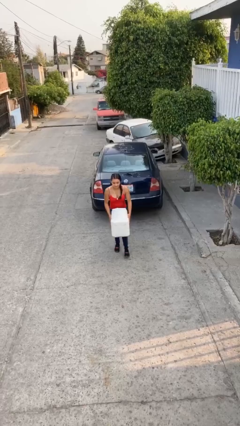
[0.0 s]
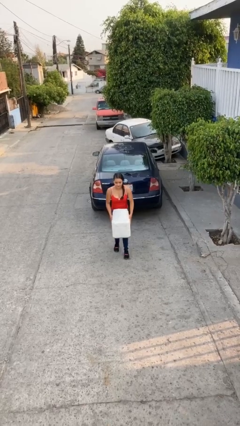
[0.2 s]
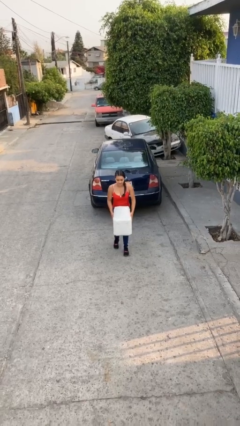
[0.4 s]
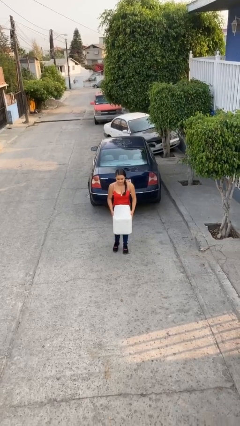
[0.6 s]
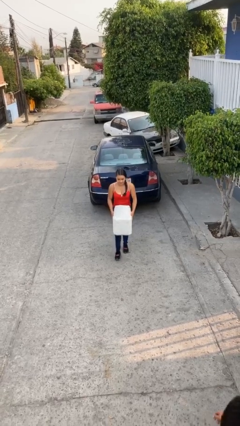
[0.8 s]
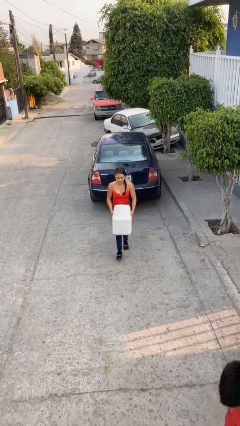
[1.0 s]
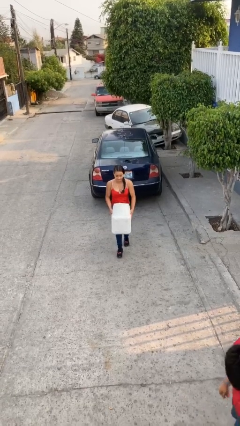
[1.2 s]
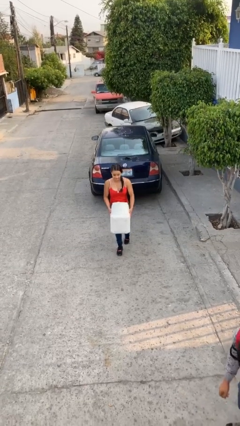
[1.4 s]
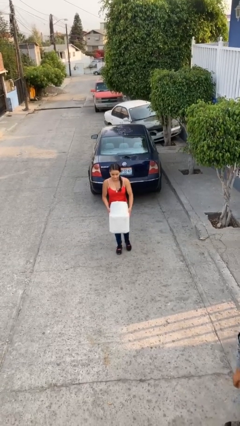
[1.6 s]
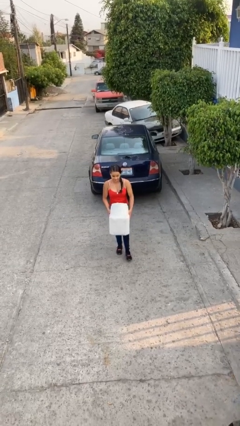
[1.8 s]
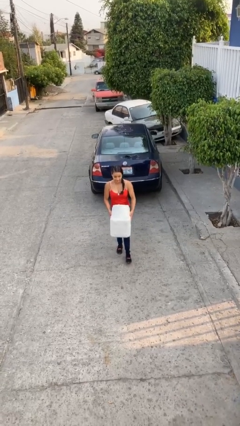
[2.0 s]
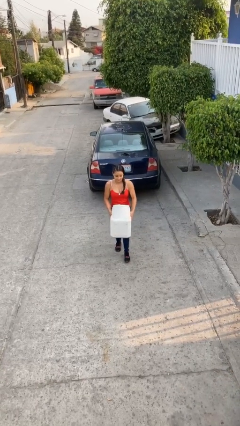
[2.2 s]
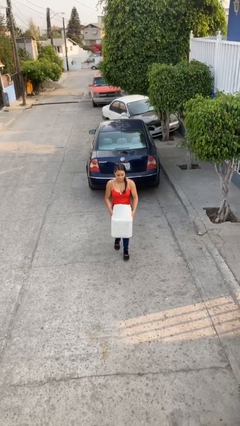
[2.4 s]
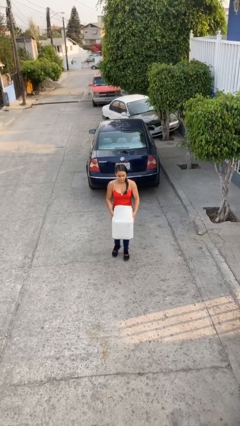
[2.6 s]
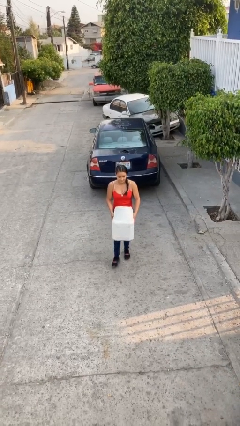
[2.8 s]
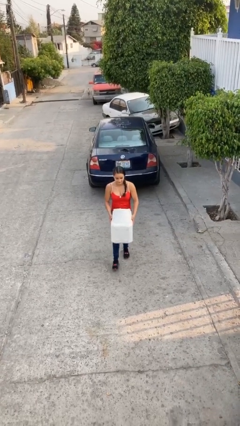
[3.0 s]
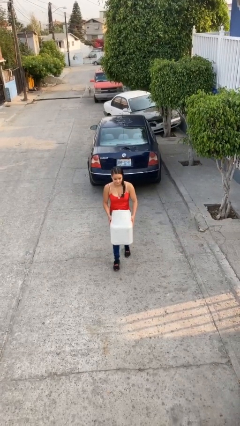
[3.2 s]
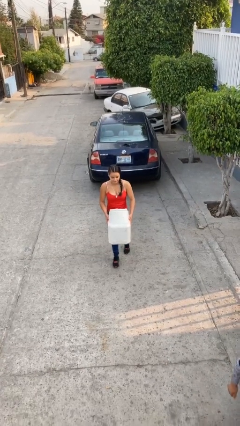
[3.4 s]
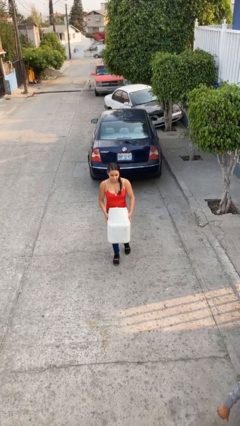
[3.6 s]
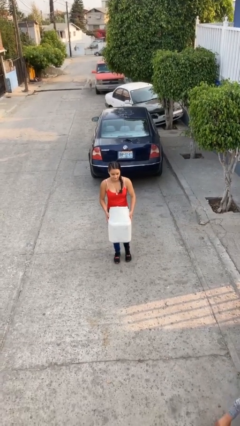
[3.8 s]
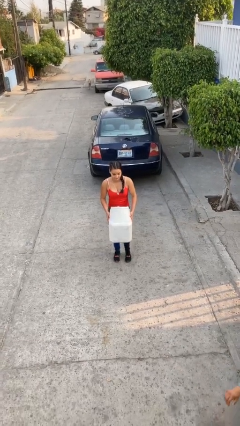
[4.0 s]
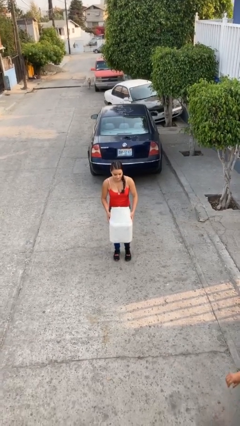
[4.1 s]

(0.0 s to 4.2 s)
person carries heavy object

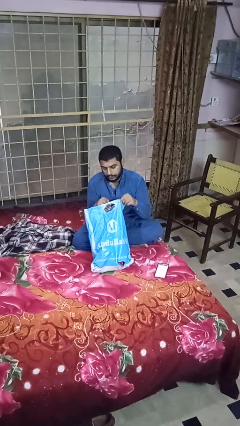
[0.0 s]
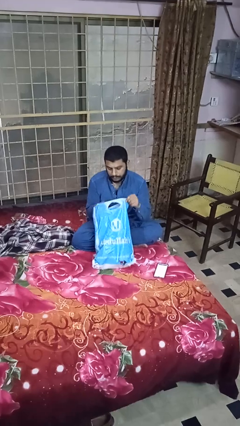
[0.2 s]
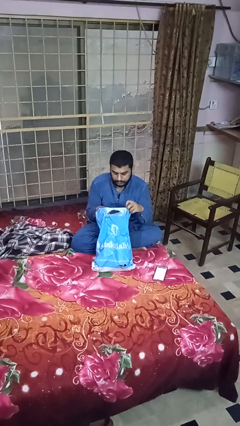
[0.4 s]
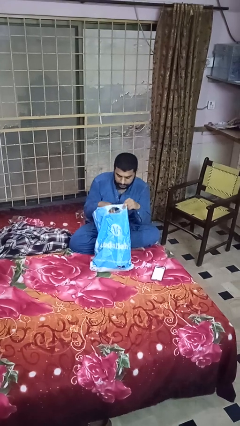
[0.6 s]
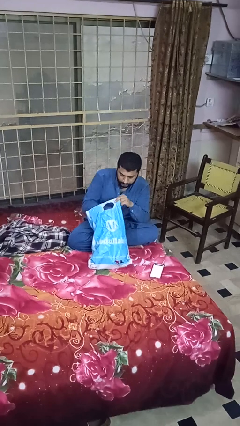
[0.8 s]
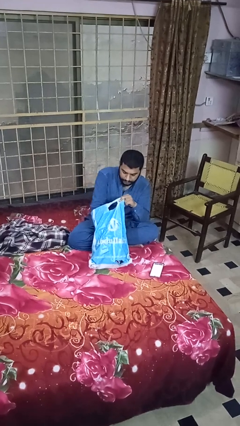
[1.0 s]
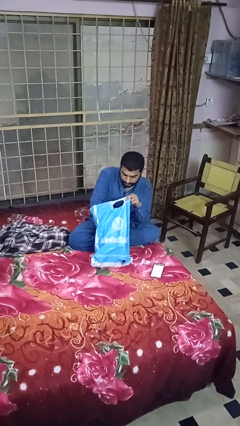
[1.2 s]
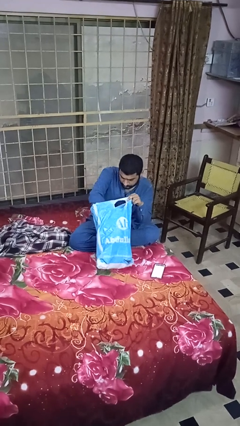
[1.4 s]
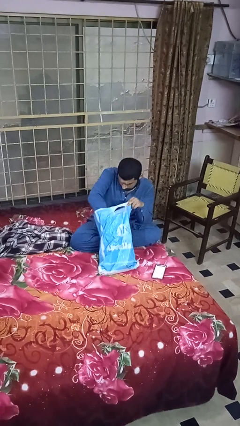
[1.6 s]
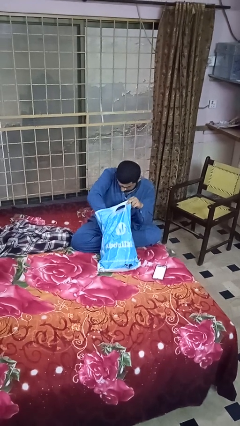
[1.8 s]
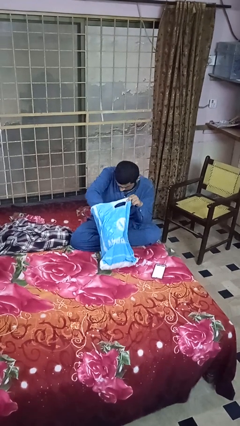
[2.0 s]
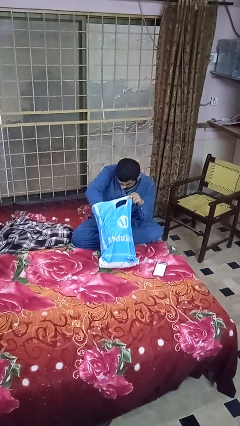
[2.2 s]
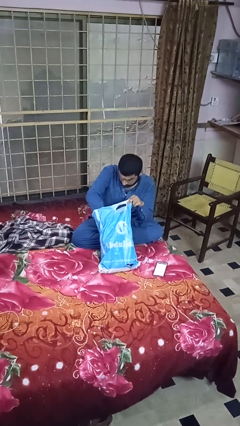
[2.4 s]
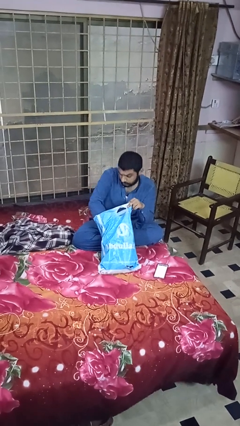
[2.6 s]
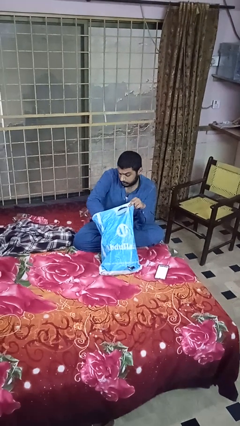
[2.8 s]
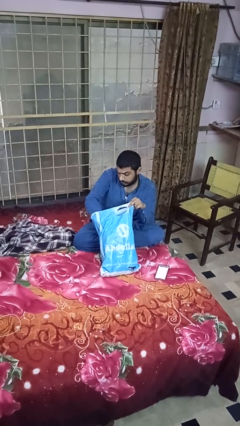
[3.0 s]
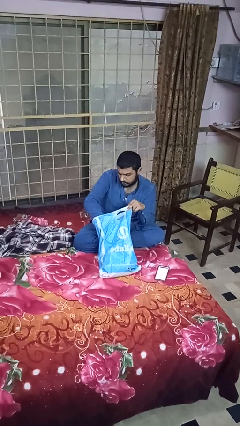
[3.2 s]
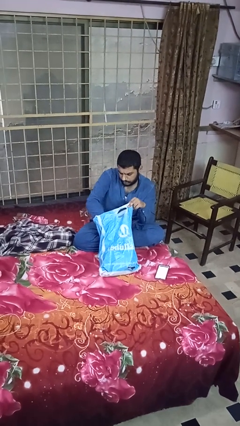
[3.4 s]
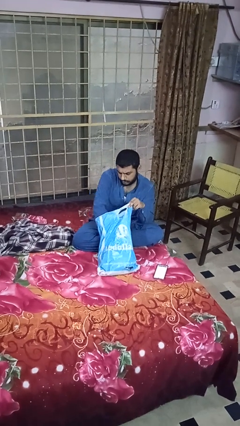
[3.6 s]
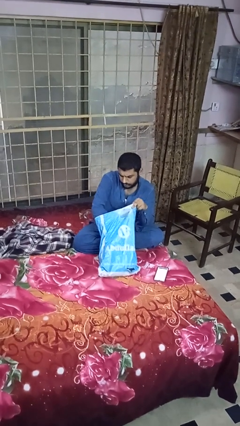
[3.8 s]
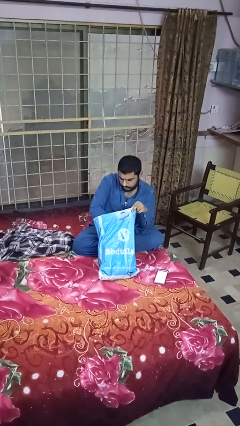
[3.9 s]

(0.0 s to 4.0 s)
person searches in bag

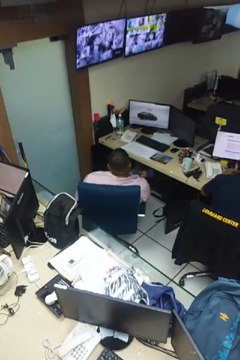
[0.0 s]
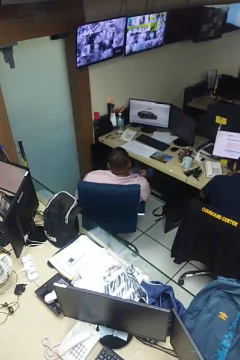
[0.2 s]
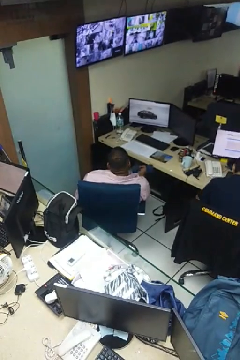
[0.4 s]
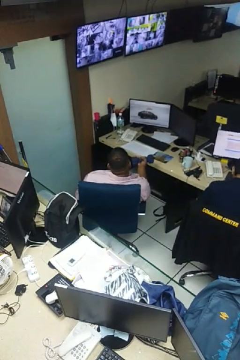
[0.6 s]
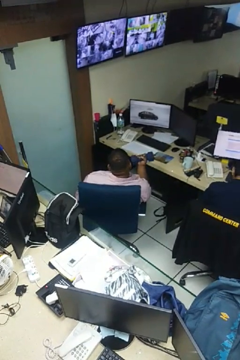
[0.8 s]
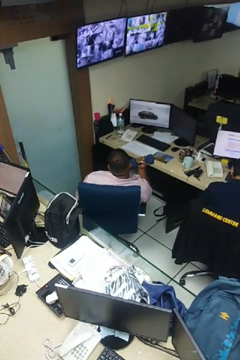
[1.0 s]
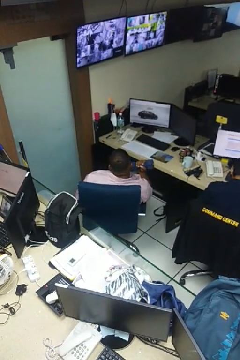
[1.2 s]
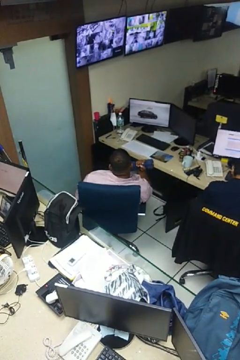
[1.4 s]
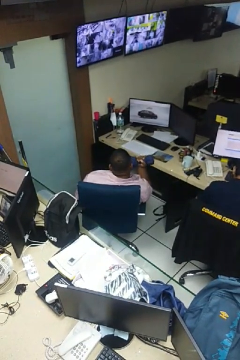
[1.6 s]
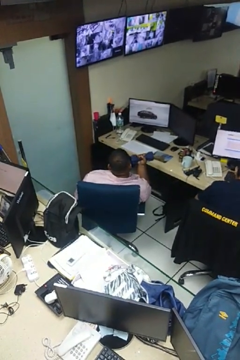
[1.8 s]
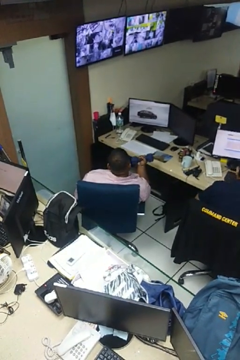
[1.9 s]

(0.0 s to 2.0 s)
person lifts dumbbells

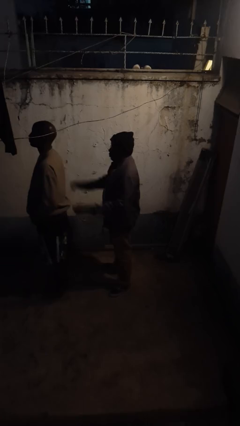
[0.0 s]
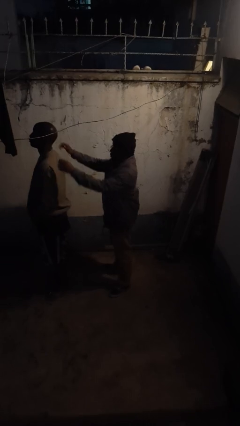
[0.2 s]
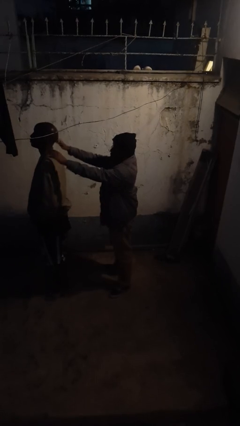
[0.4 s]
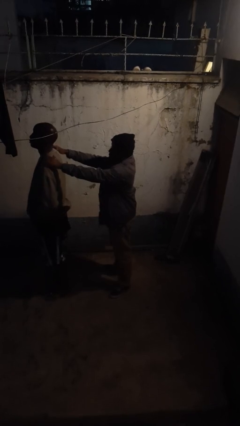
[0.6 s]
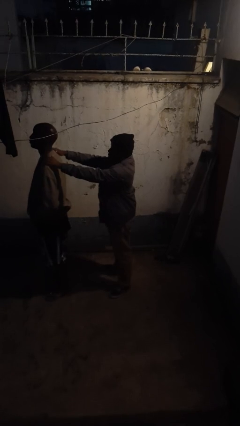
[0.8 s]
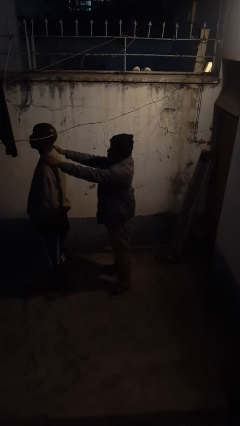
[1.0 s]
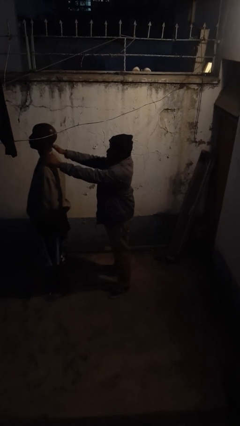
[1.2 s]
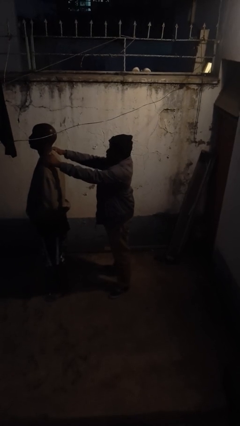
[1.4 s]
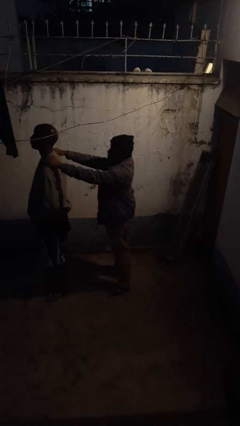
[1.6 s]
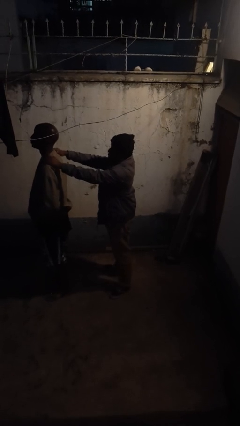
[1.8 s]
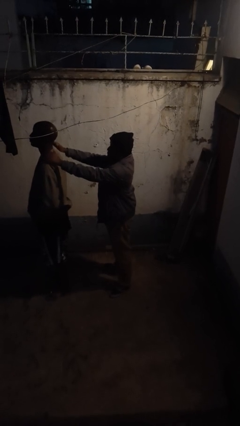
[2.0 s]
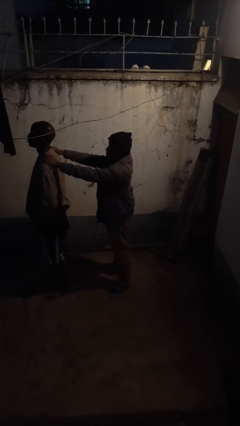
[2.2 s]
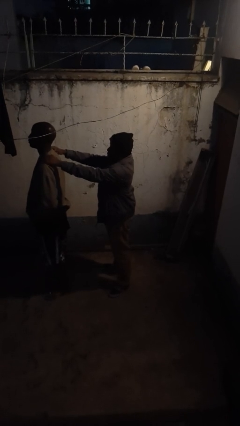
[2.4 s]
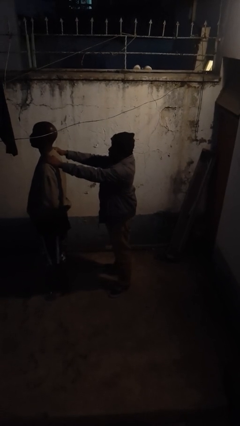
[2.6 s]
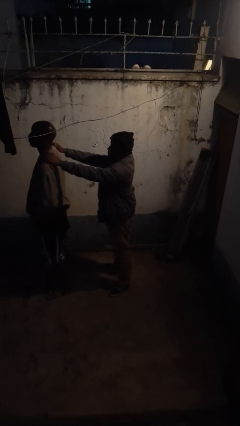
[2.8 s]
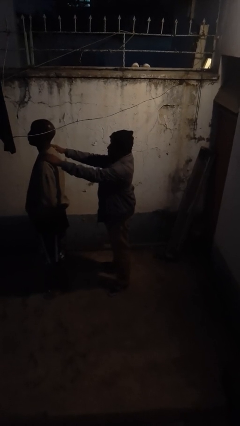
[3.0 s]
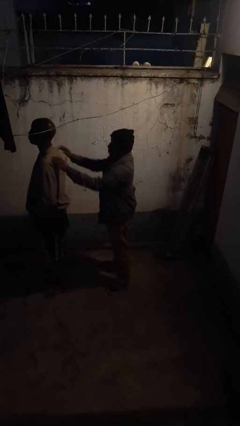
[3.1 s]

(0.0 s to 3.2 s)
person pounds shoulders of person

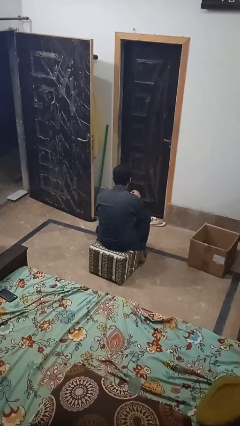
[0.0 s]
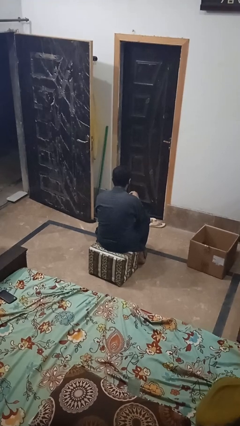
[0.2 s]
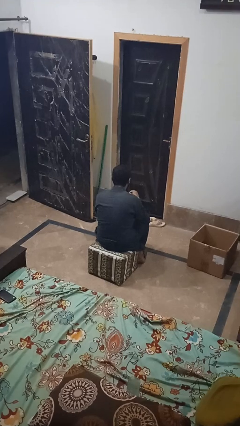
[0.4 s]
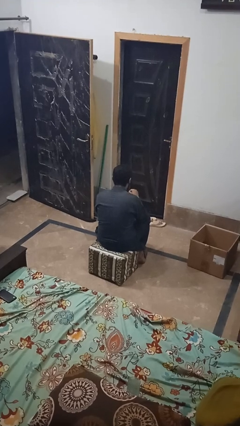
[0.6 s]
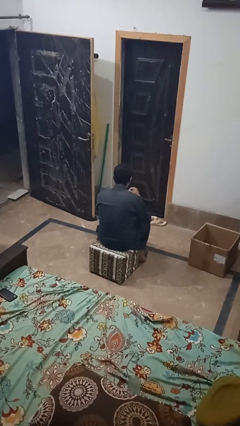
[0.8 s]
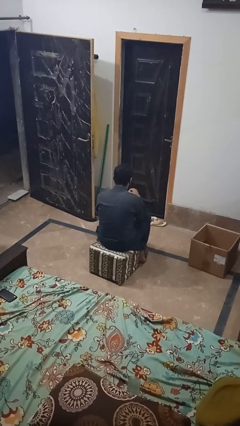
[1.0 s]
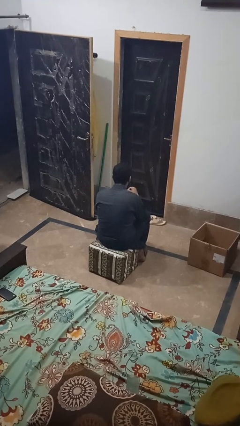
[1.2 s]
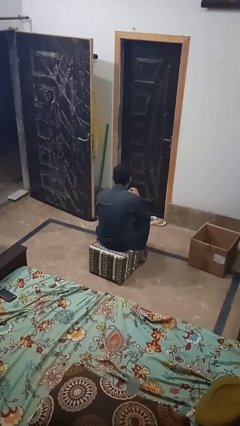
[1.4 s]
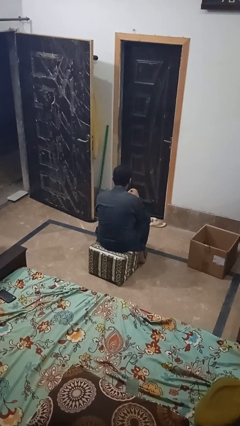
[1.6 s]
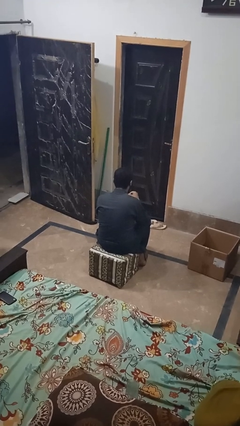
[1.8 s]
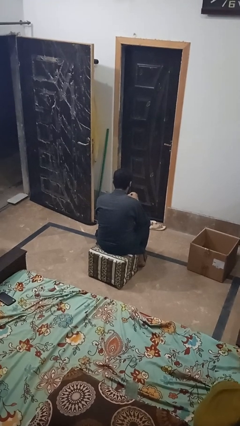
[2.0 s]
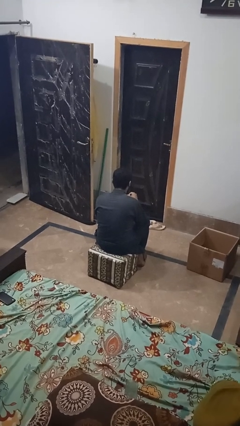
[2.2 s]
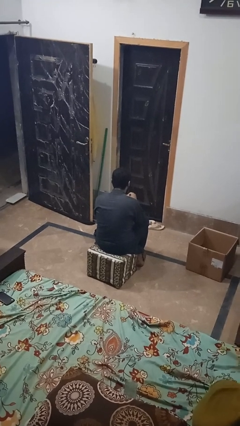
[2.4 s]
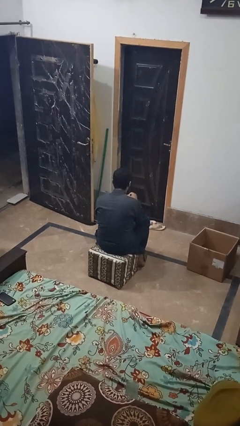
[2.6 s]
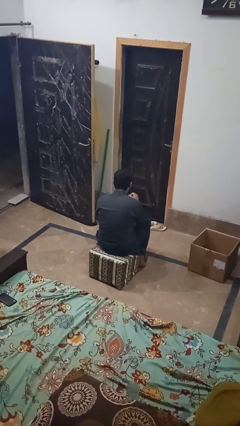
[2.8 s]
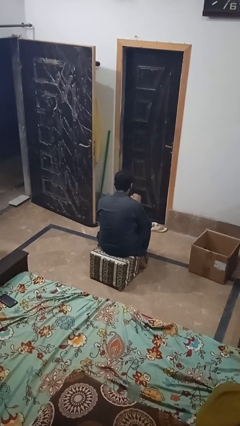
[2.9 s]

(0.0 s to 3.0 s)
person stirs mug

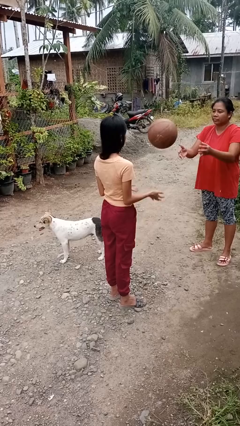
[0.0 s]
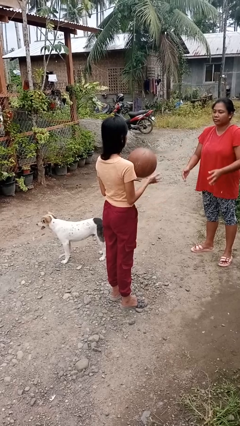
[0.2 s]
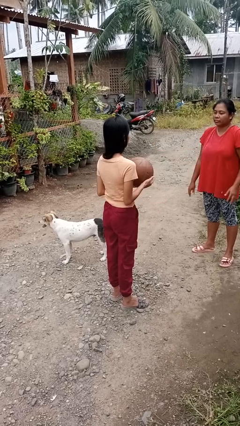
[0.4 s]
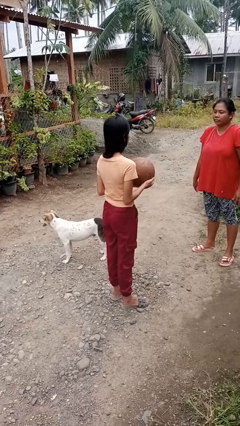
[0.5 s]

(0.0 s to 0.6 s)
person catches object from person

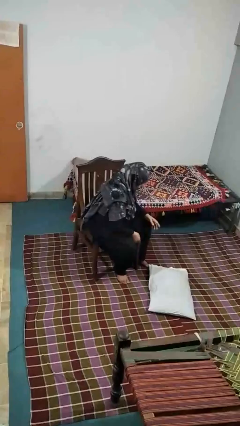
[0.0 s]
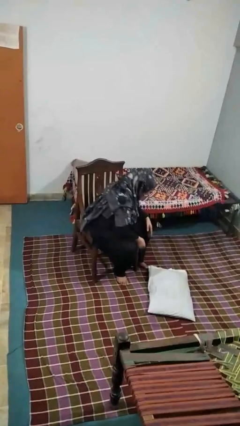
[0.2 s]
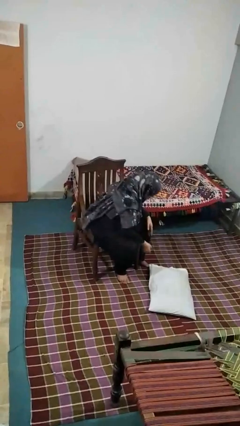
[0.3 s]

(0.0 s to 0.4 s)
person picks up object from floor
